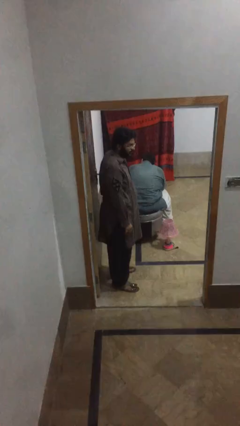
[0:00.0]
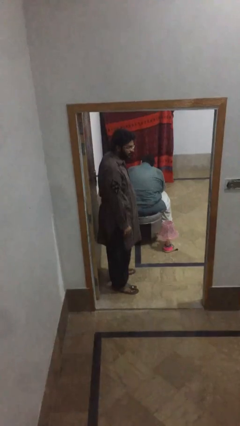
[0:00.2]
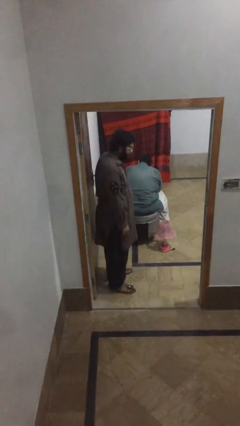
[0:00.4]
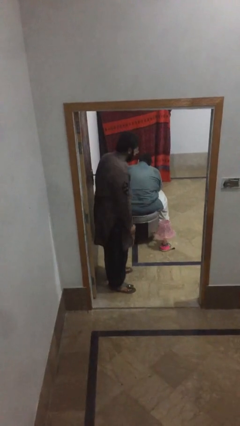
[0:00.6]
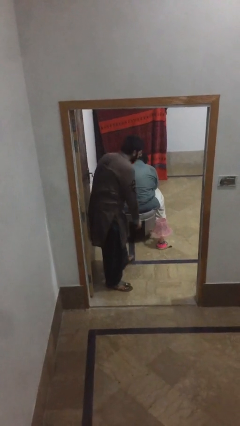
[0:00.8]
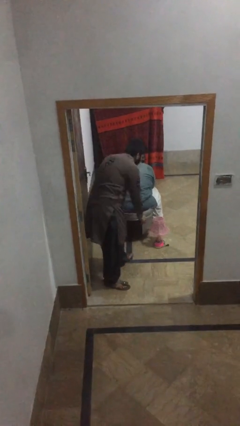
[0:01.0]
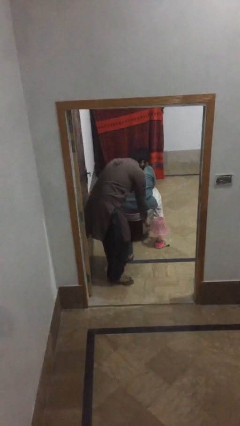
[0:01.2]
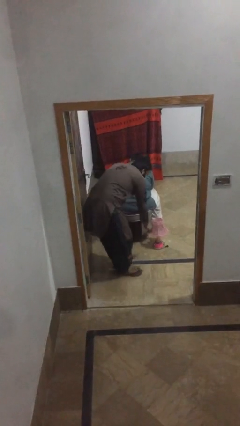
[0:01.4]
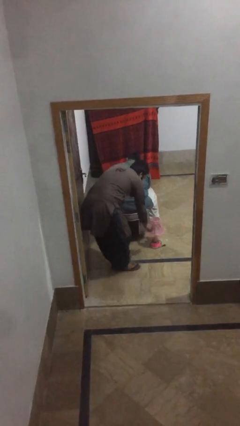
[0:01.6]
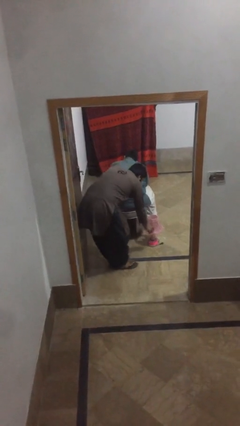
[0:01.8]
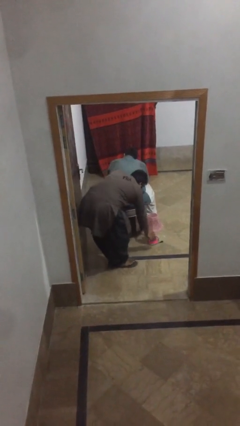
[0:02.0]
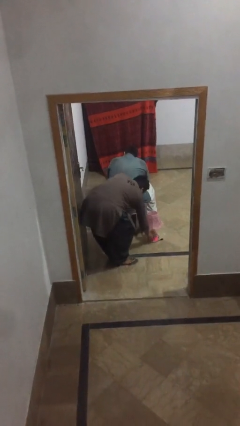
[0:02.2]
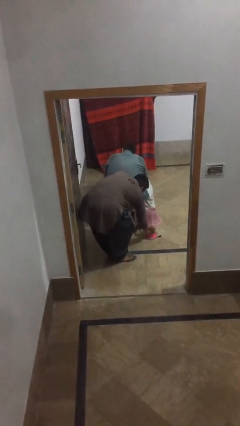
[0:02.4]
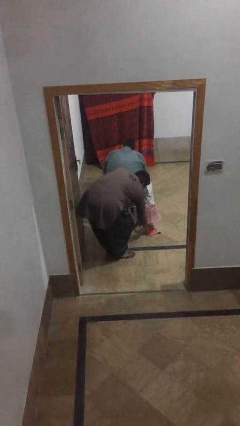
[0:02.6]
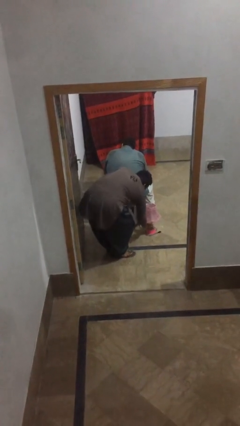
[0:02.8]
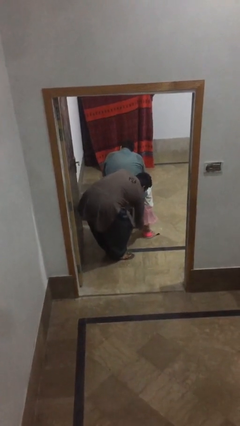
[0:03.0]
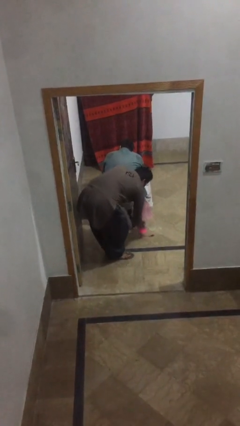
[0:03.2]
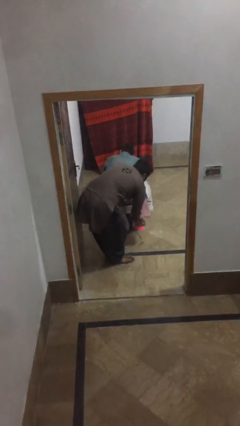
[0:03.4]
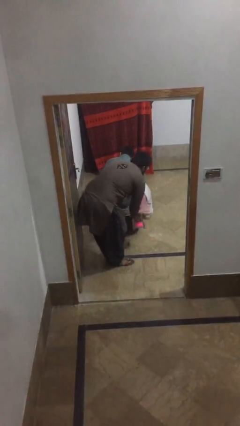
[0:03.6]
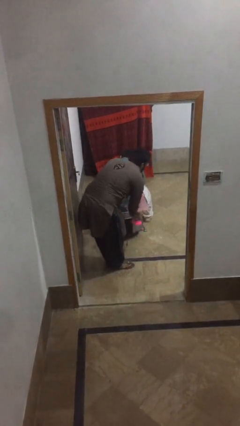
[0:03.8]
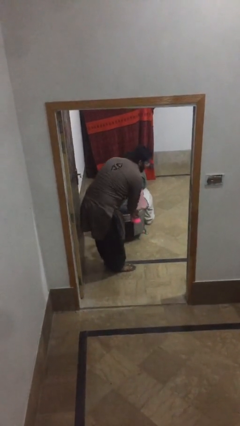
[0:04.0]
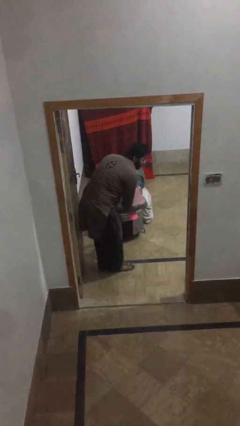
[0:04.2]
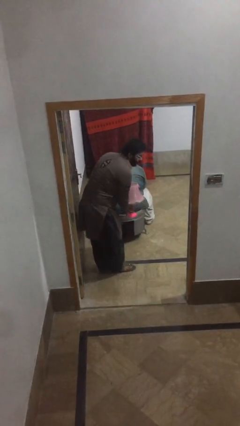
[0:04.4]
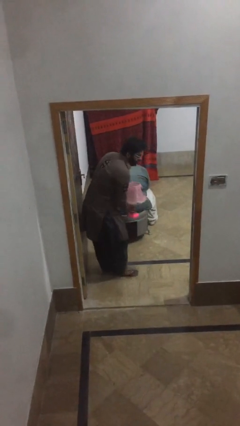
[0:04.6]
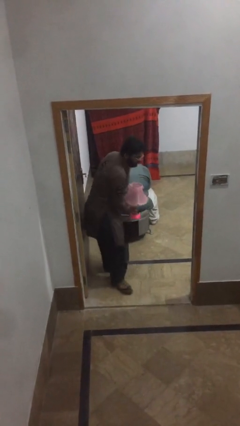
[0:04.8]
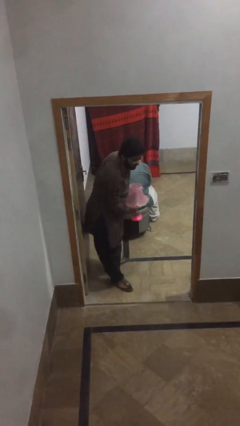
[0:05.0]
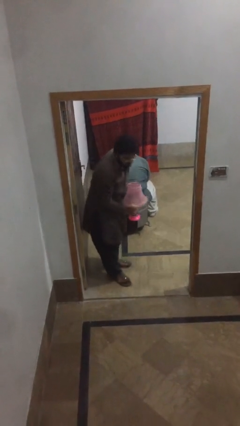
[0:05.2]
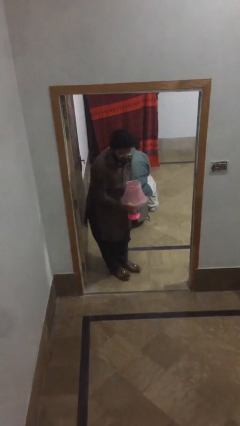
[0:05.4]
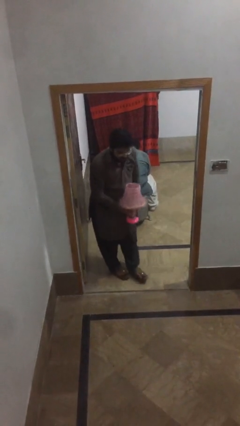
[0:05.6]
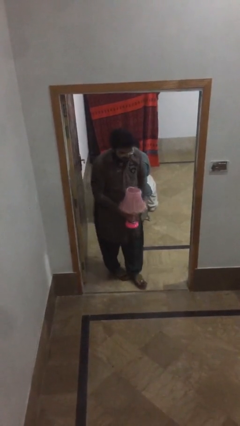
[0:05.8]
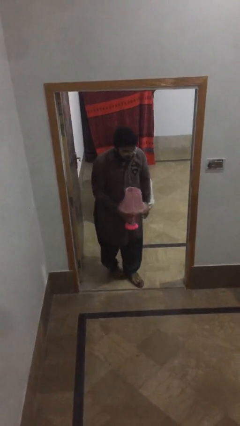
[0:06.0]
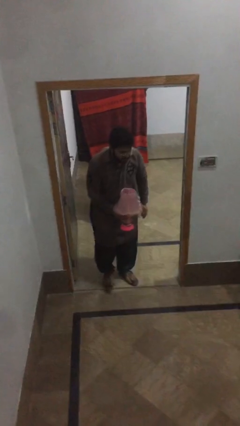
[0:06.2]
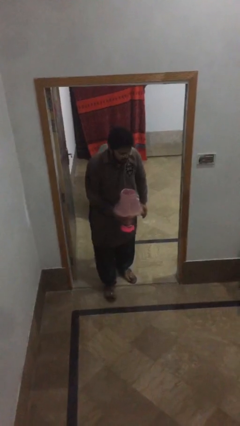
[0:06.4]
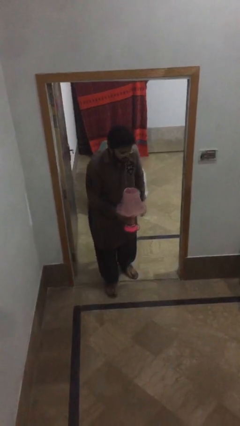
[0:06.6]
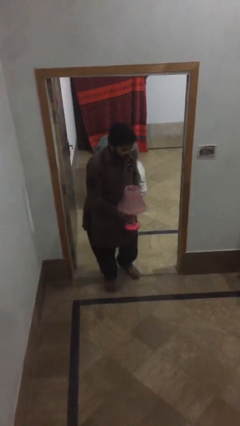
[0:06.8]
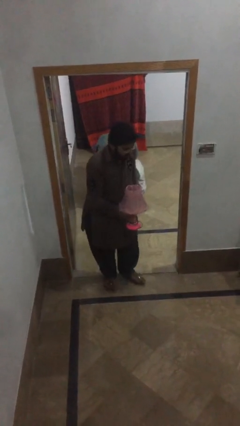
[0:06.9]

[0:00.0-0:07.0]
person steals object from person

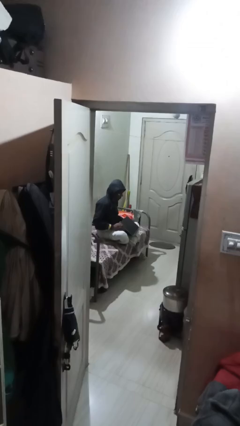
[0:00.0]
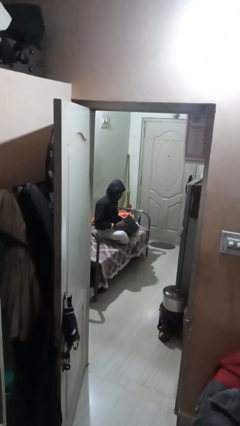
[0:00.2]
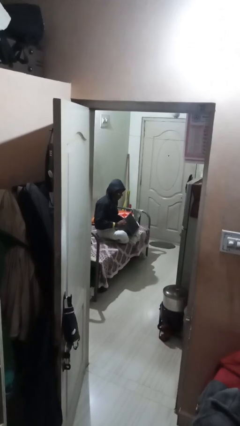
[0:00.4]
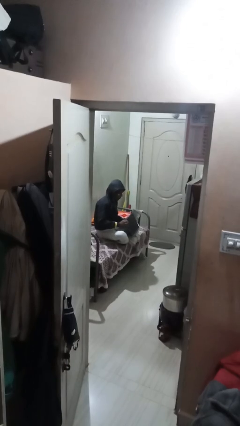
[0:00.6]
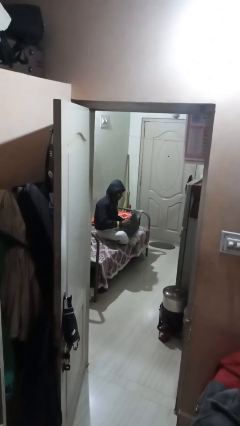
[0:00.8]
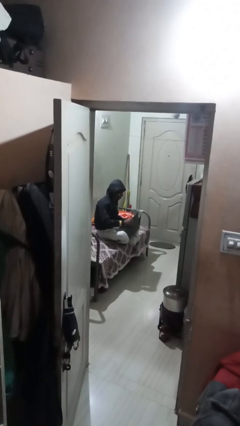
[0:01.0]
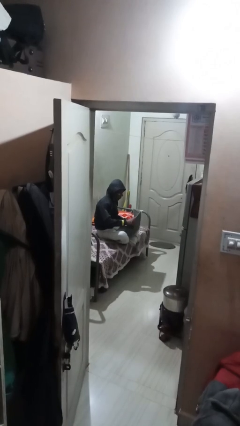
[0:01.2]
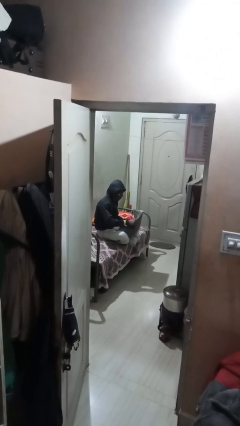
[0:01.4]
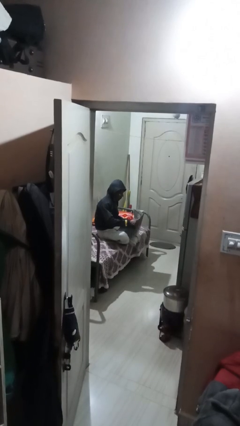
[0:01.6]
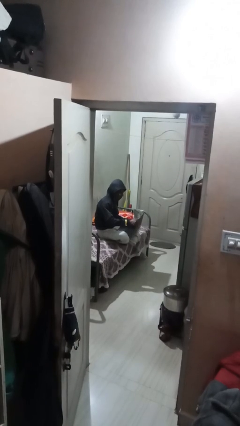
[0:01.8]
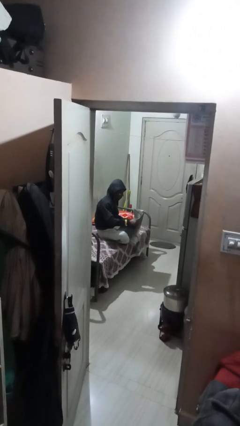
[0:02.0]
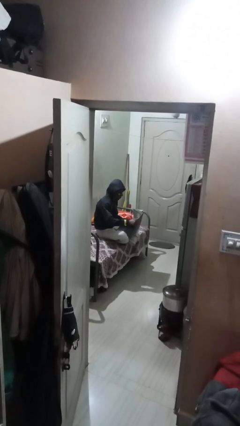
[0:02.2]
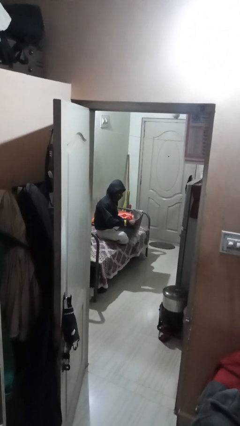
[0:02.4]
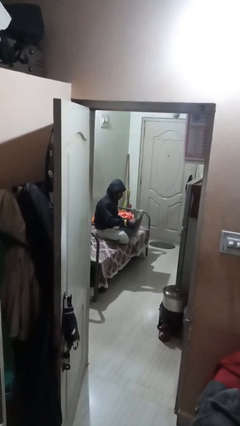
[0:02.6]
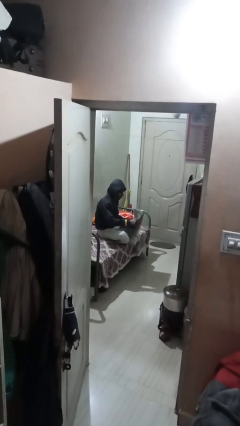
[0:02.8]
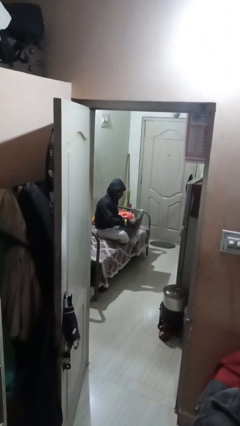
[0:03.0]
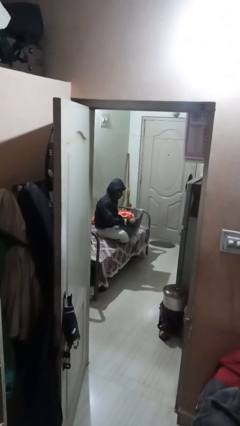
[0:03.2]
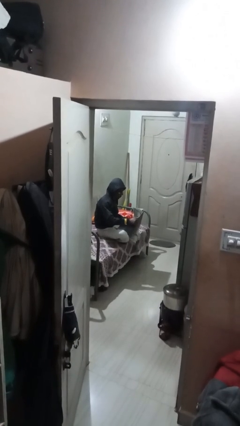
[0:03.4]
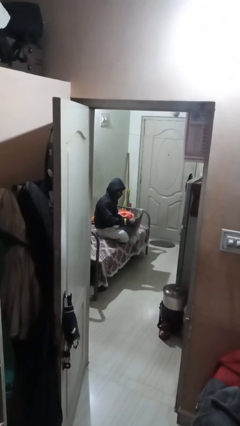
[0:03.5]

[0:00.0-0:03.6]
person interacts with laptop

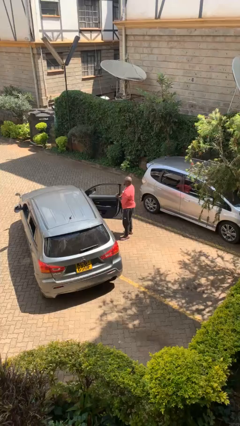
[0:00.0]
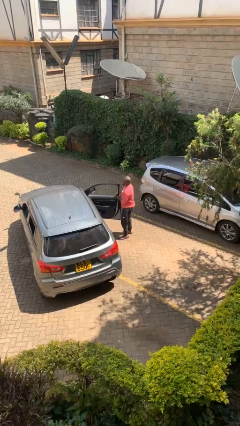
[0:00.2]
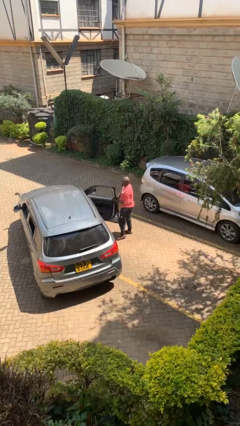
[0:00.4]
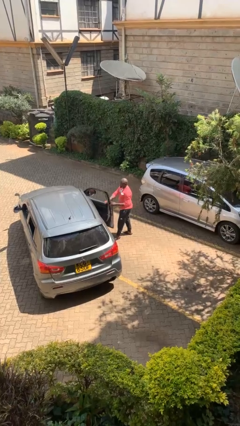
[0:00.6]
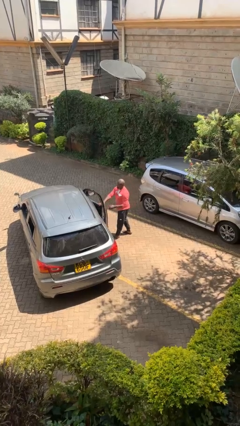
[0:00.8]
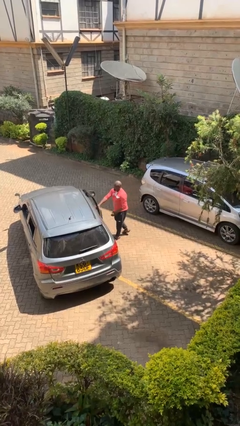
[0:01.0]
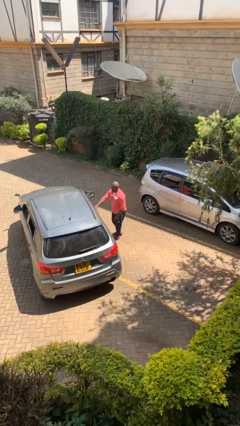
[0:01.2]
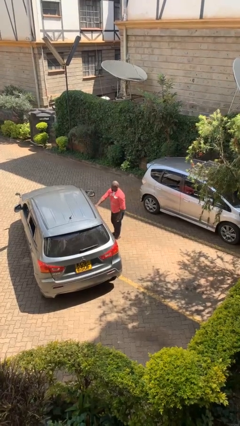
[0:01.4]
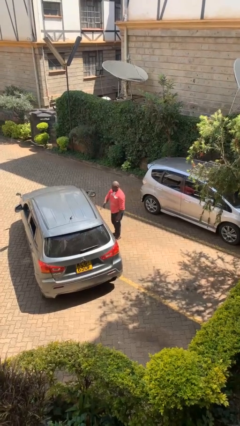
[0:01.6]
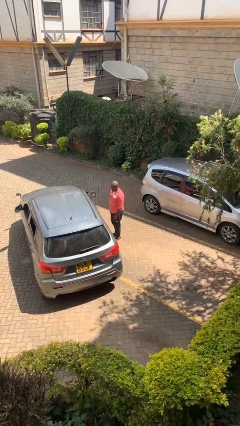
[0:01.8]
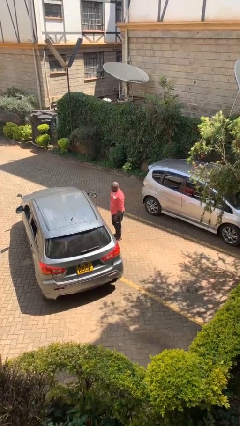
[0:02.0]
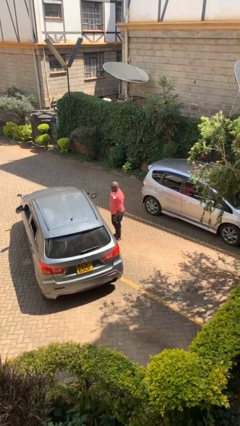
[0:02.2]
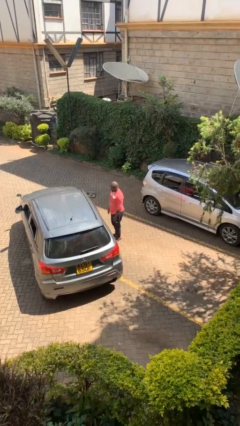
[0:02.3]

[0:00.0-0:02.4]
person closes car door

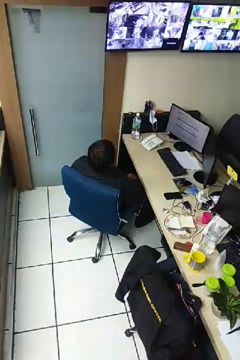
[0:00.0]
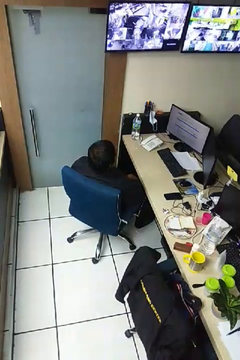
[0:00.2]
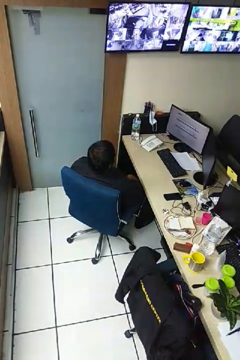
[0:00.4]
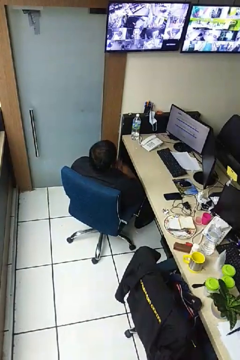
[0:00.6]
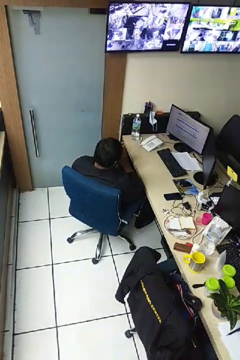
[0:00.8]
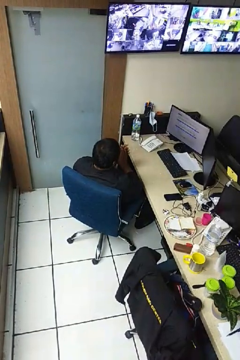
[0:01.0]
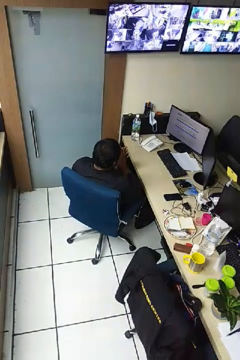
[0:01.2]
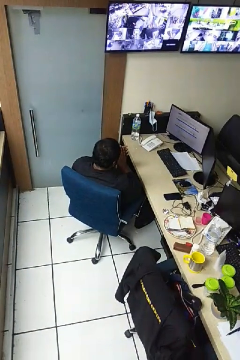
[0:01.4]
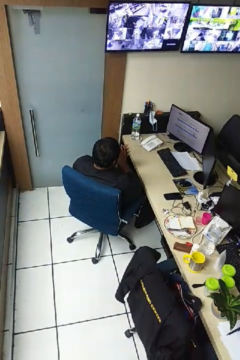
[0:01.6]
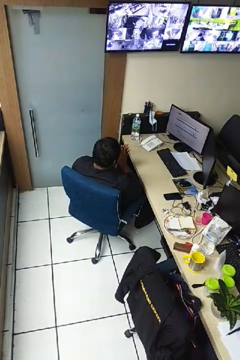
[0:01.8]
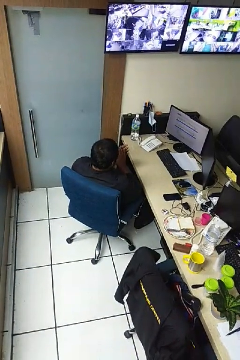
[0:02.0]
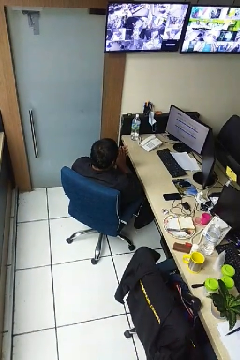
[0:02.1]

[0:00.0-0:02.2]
person claps hands

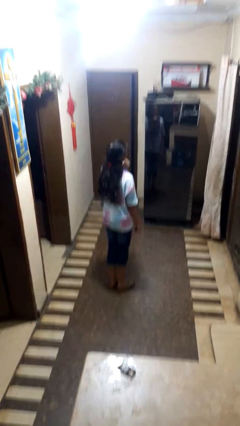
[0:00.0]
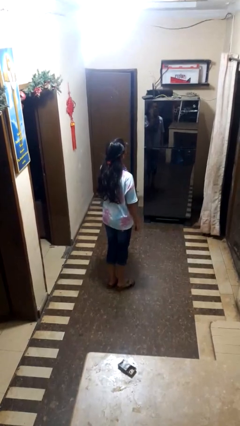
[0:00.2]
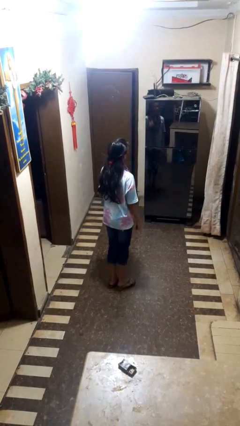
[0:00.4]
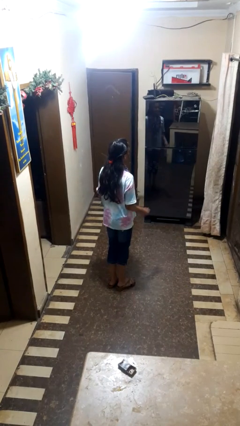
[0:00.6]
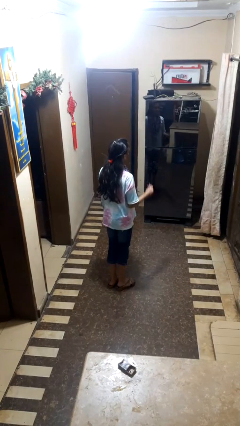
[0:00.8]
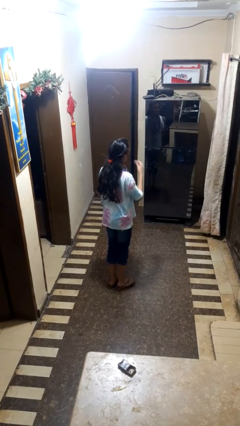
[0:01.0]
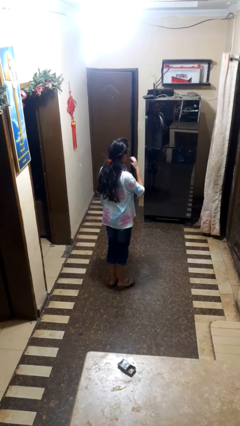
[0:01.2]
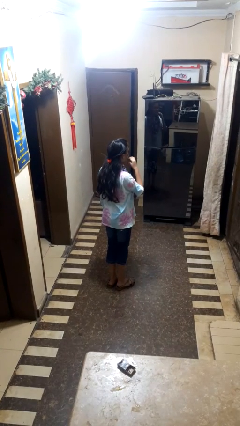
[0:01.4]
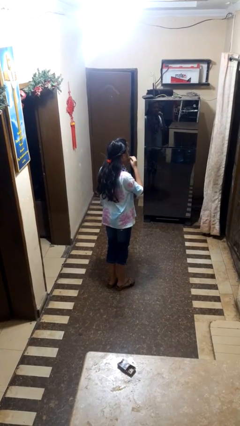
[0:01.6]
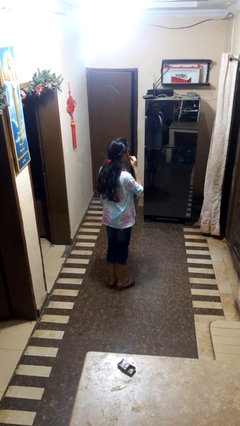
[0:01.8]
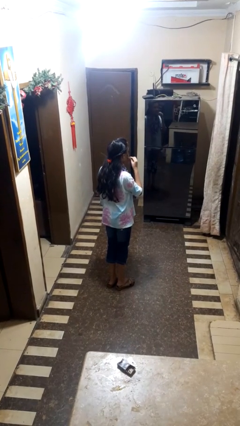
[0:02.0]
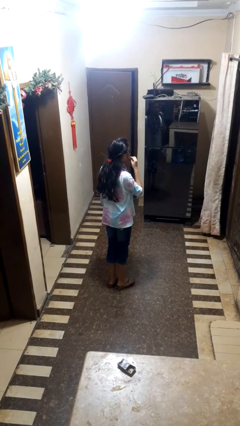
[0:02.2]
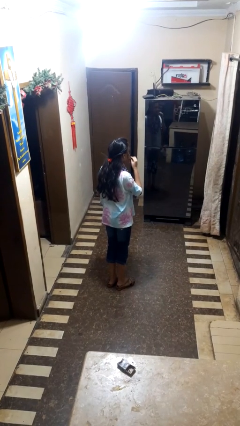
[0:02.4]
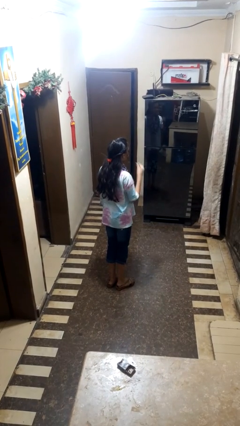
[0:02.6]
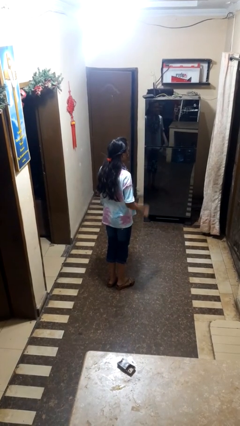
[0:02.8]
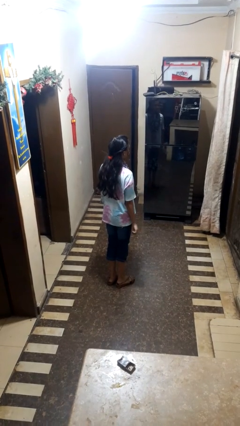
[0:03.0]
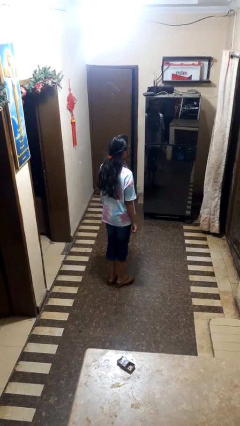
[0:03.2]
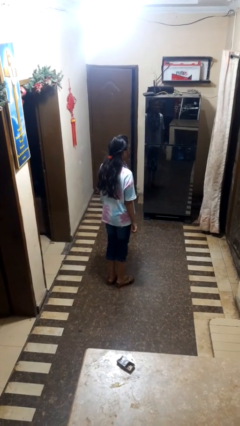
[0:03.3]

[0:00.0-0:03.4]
person flosses
